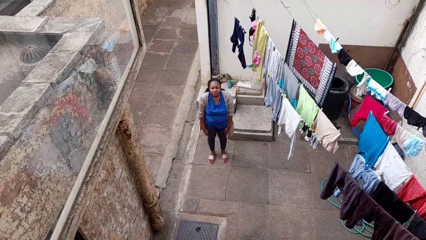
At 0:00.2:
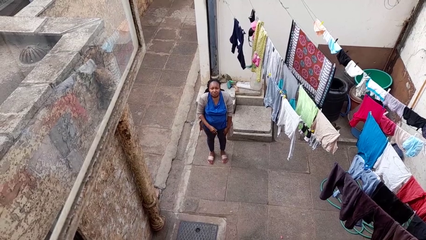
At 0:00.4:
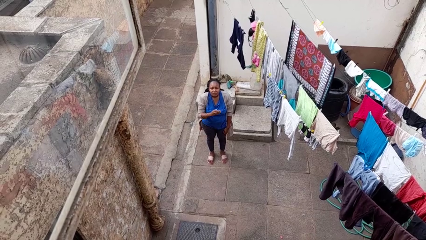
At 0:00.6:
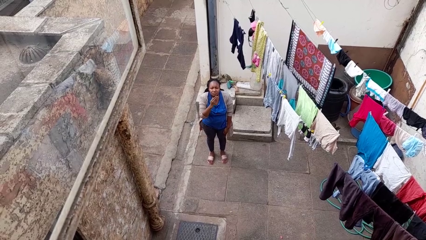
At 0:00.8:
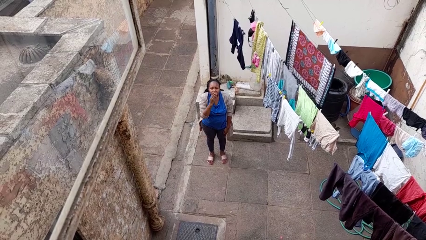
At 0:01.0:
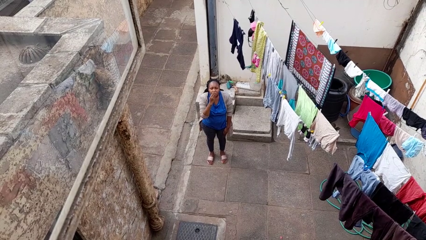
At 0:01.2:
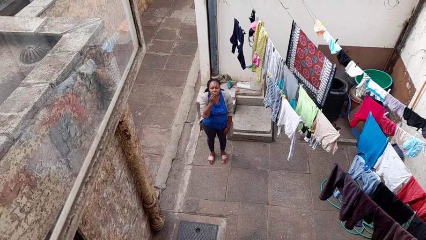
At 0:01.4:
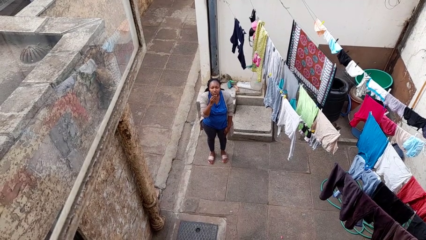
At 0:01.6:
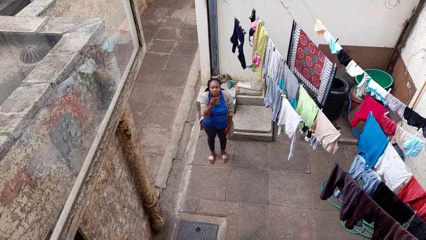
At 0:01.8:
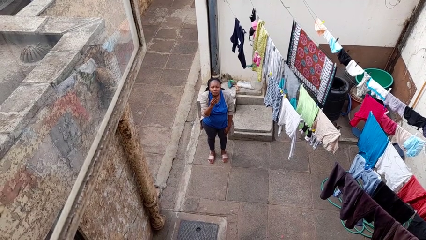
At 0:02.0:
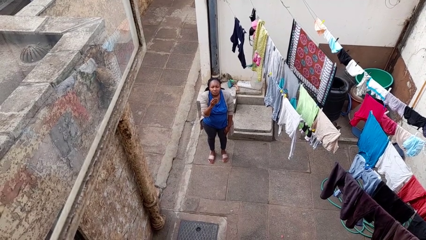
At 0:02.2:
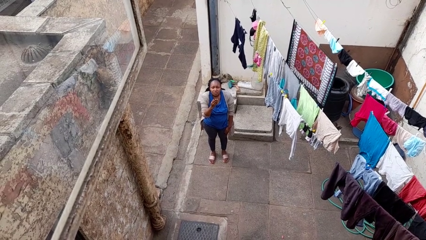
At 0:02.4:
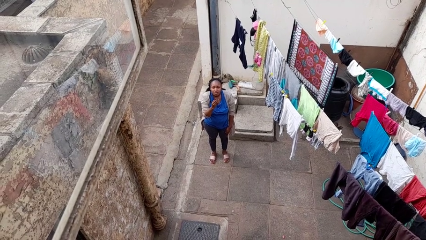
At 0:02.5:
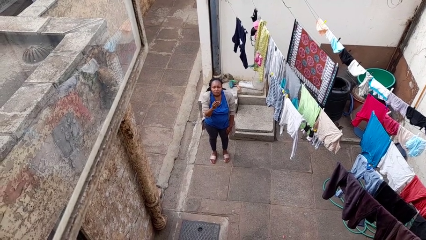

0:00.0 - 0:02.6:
person gestures blow kiss

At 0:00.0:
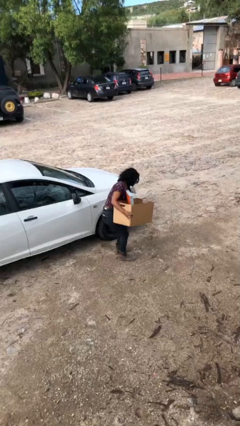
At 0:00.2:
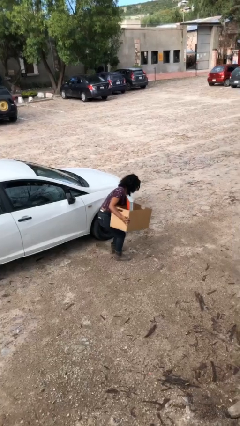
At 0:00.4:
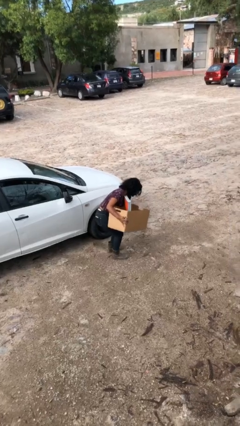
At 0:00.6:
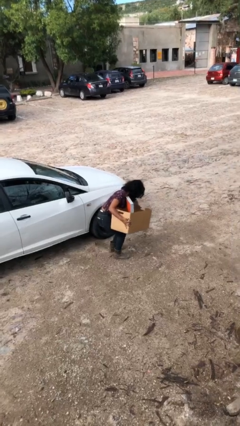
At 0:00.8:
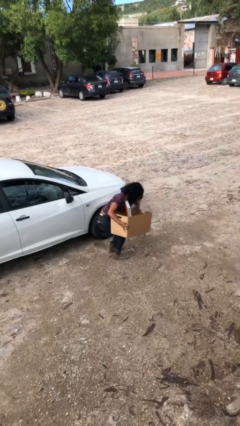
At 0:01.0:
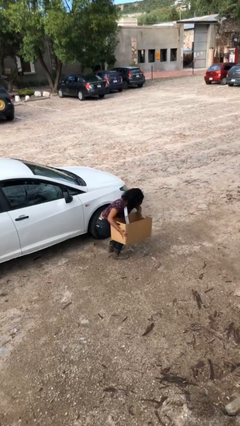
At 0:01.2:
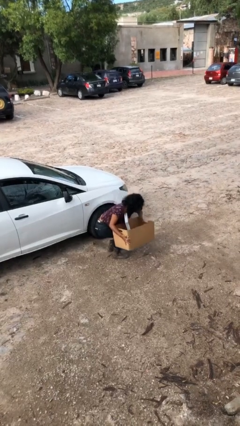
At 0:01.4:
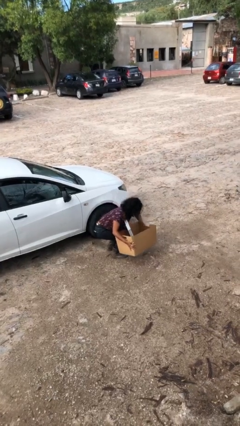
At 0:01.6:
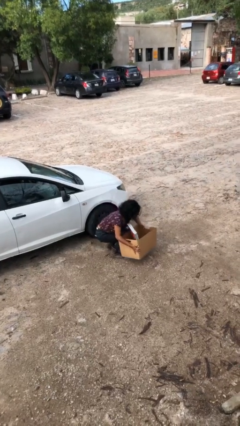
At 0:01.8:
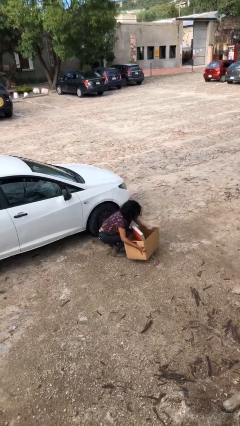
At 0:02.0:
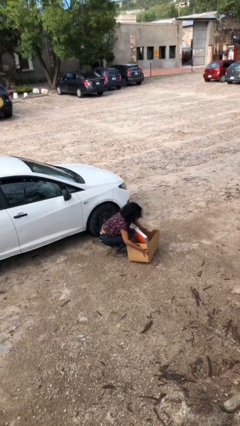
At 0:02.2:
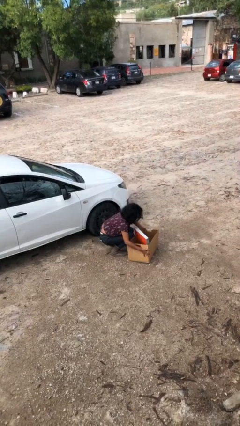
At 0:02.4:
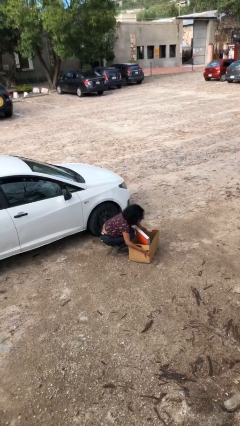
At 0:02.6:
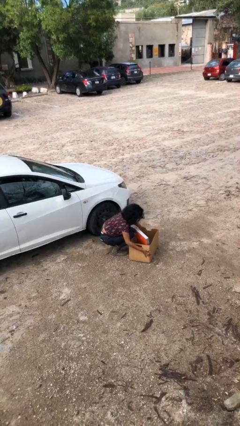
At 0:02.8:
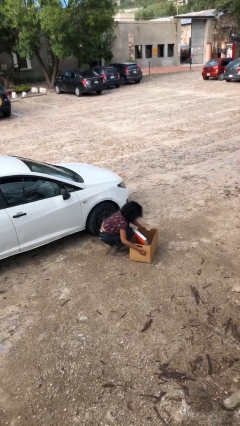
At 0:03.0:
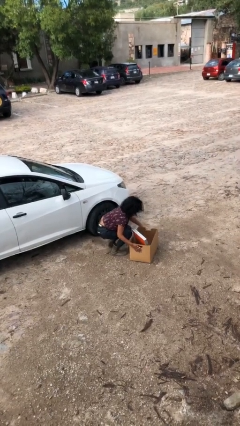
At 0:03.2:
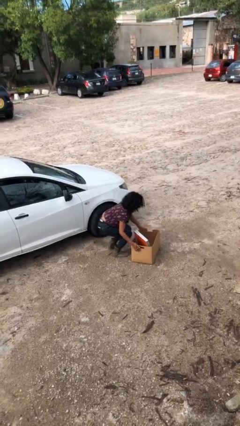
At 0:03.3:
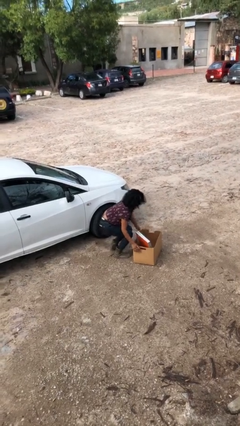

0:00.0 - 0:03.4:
person puts down object on floor

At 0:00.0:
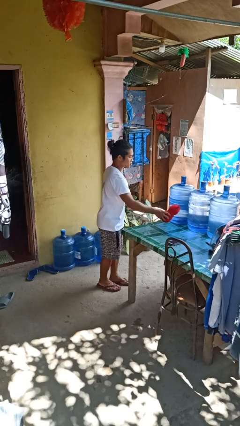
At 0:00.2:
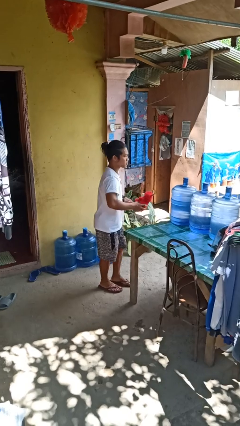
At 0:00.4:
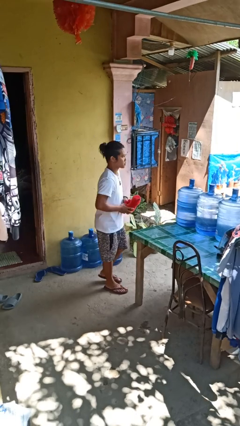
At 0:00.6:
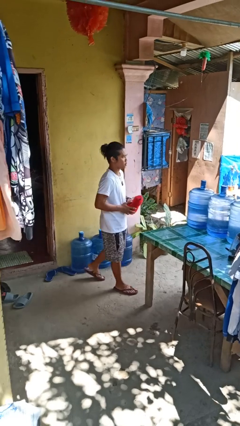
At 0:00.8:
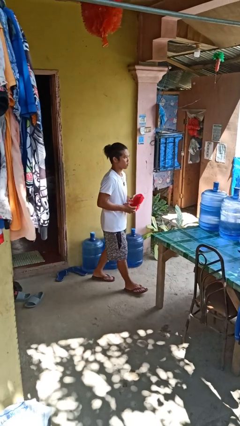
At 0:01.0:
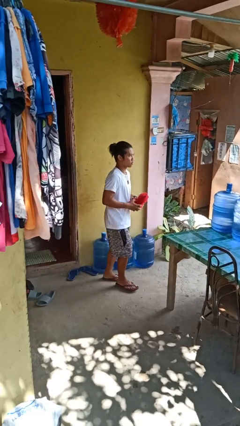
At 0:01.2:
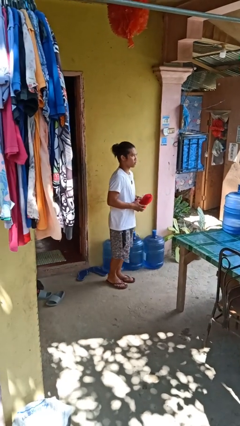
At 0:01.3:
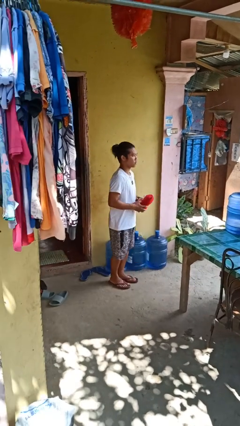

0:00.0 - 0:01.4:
person picks up object from table

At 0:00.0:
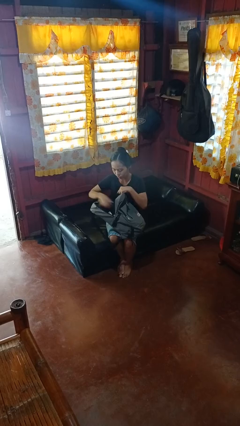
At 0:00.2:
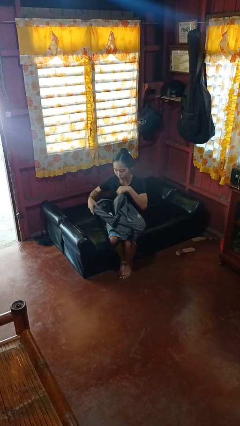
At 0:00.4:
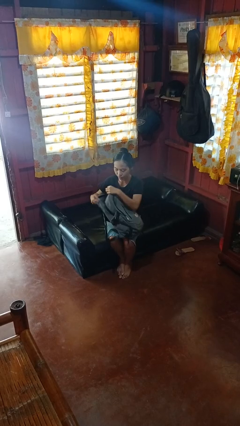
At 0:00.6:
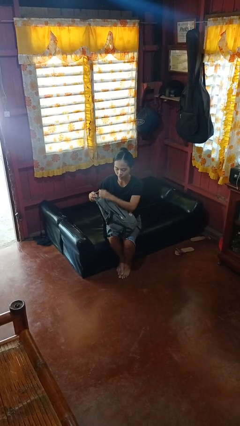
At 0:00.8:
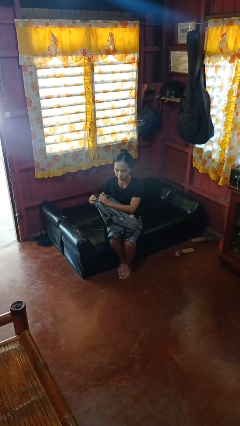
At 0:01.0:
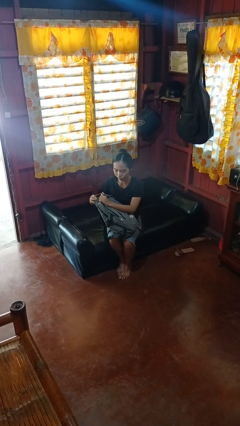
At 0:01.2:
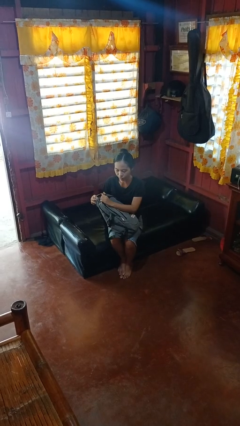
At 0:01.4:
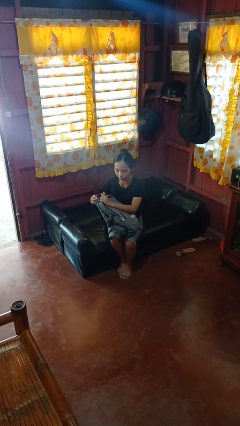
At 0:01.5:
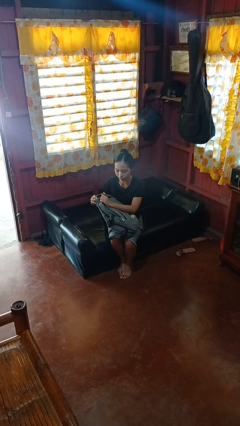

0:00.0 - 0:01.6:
person puts object into backpack

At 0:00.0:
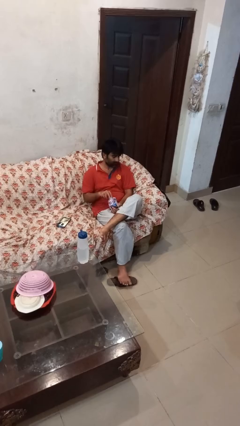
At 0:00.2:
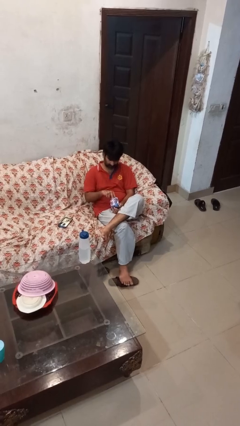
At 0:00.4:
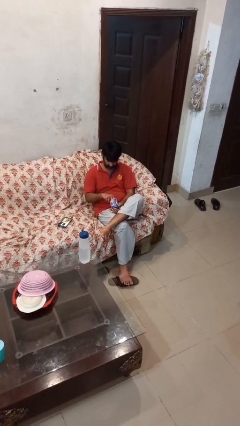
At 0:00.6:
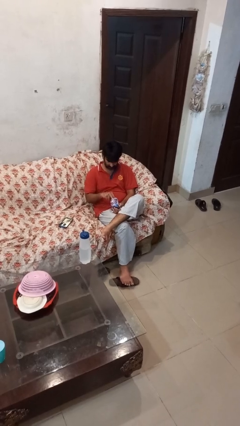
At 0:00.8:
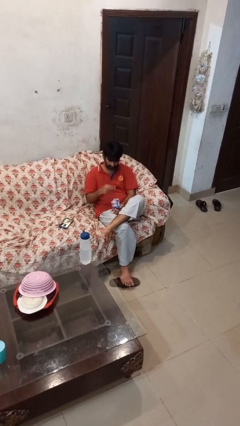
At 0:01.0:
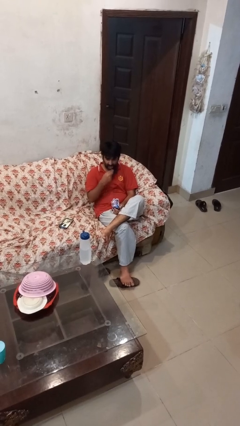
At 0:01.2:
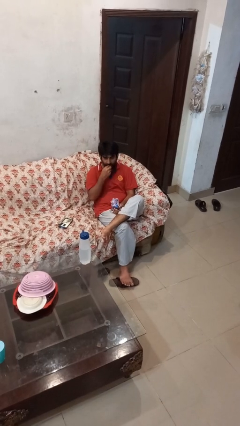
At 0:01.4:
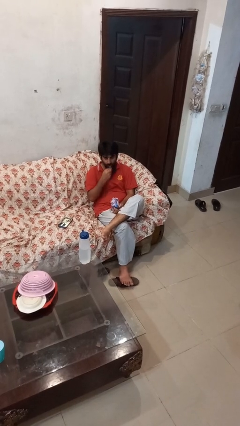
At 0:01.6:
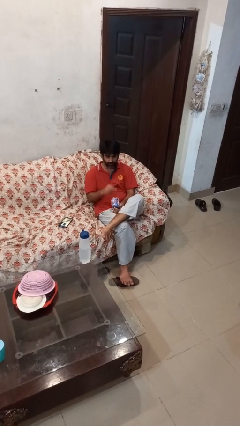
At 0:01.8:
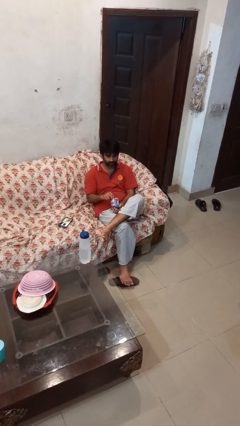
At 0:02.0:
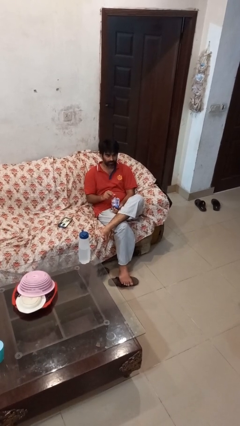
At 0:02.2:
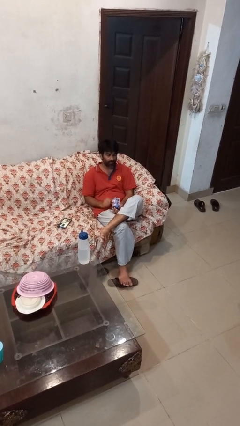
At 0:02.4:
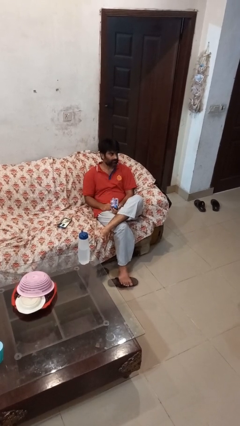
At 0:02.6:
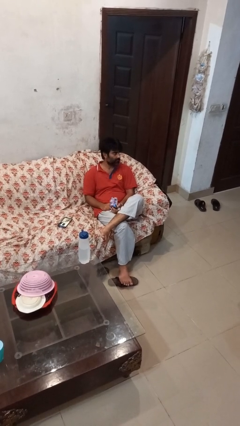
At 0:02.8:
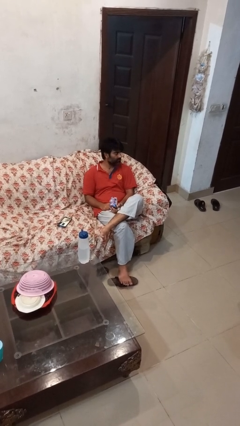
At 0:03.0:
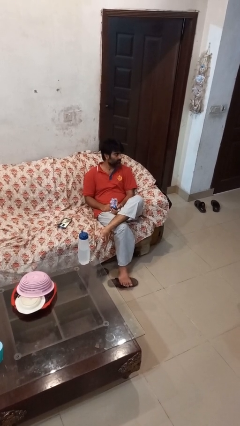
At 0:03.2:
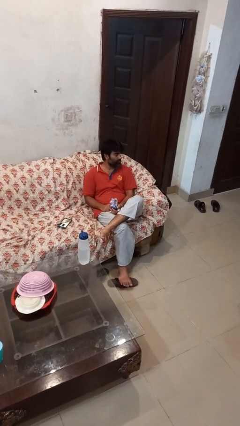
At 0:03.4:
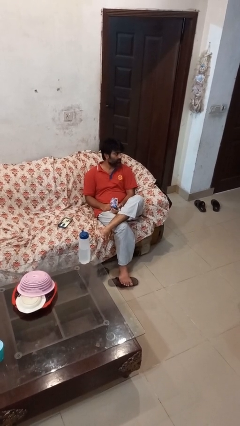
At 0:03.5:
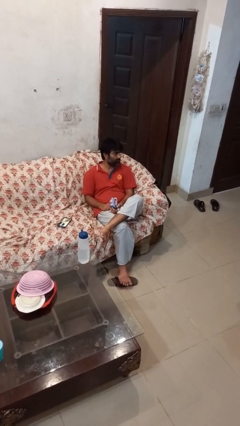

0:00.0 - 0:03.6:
person eats snack from bag

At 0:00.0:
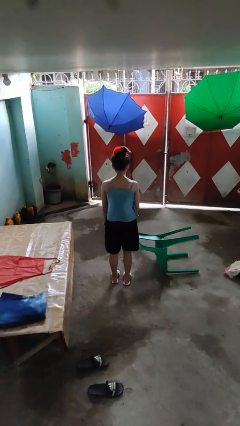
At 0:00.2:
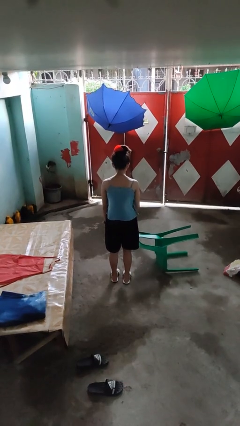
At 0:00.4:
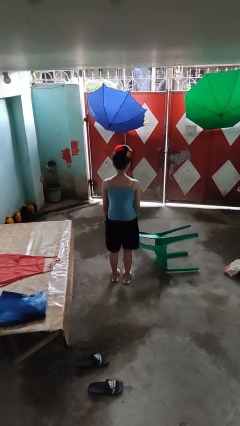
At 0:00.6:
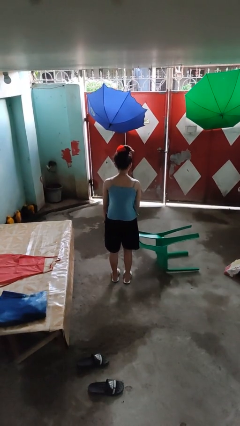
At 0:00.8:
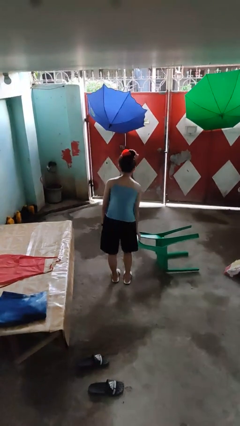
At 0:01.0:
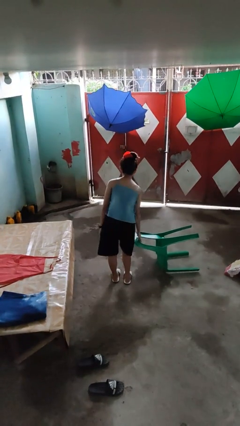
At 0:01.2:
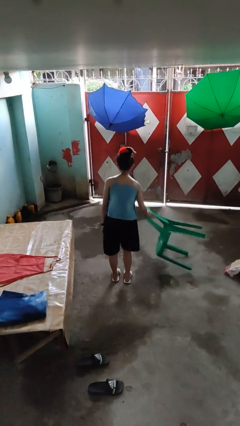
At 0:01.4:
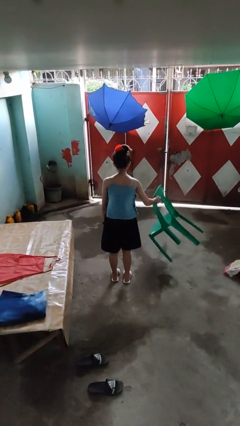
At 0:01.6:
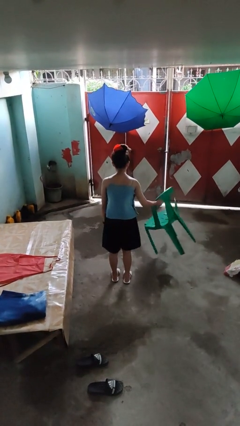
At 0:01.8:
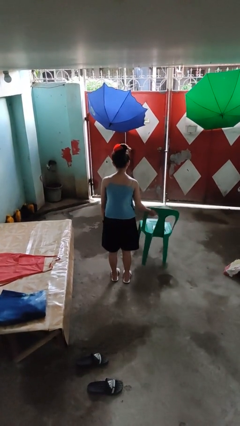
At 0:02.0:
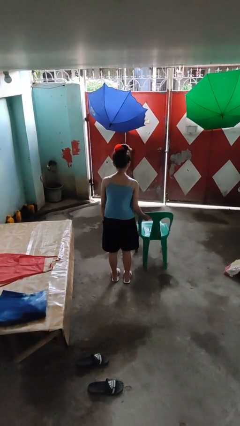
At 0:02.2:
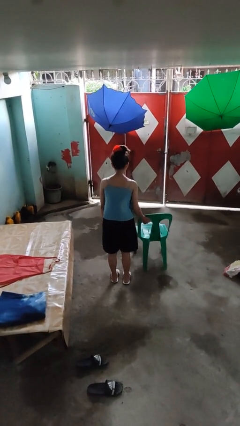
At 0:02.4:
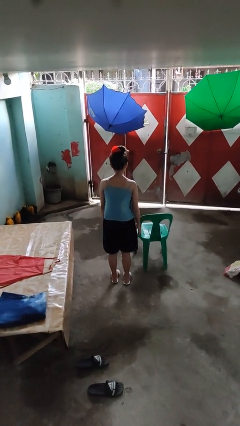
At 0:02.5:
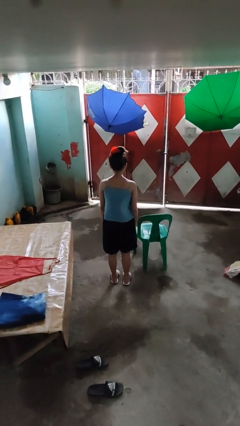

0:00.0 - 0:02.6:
person sets upright furniture

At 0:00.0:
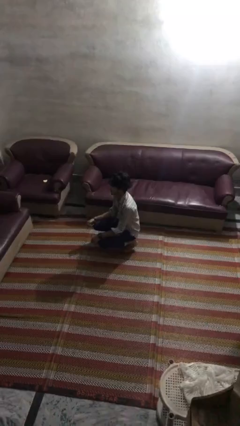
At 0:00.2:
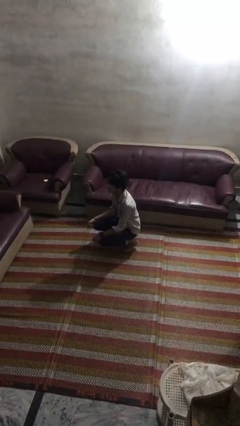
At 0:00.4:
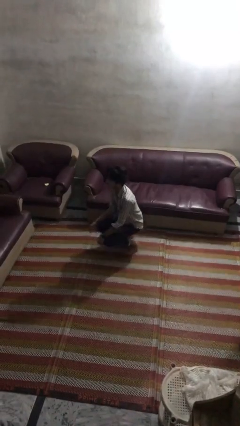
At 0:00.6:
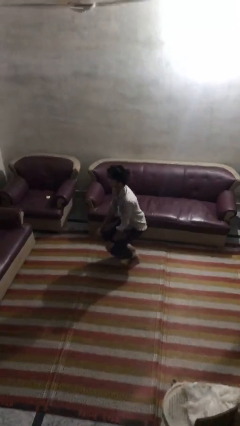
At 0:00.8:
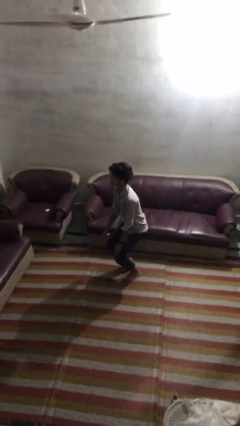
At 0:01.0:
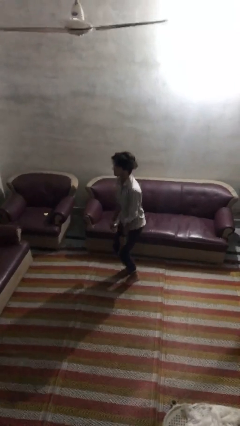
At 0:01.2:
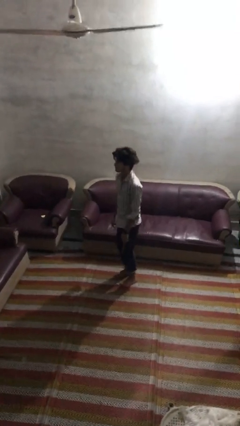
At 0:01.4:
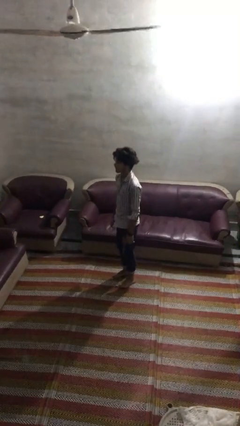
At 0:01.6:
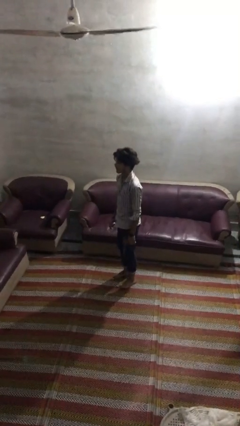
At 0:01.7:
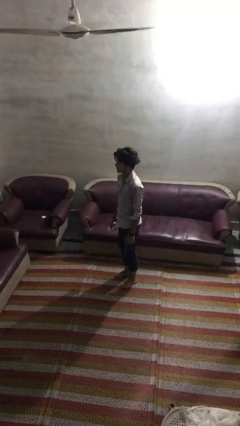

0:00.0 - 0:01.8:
person stands up
